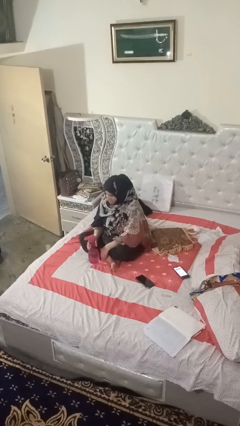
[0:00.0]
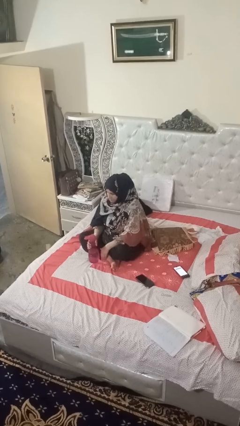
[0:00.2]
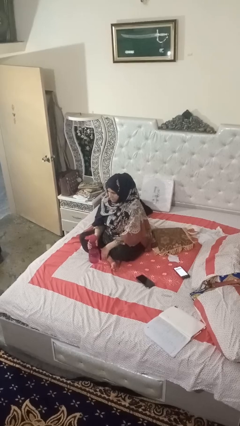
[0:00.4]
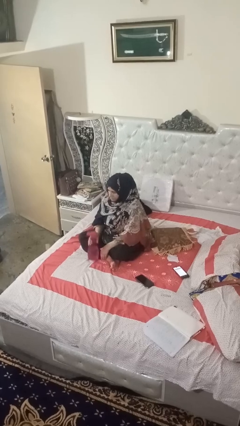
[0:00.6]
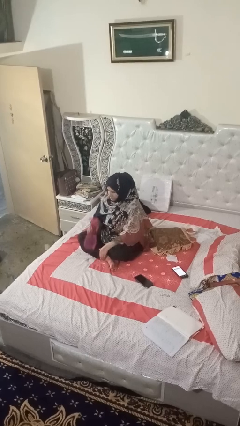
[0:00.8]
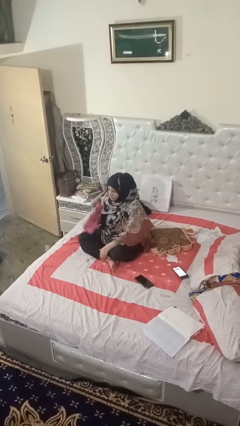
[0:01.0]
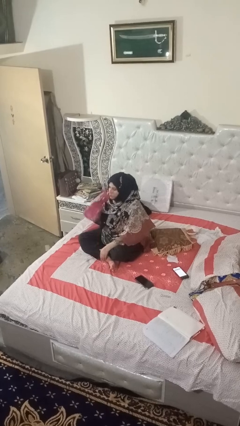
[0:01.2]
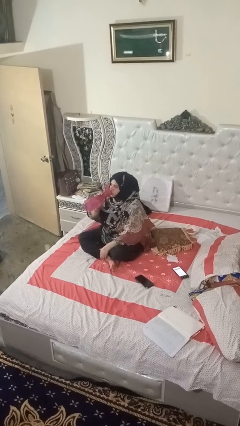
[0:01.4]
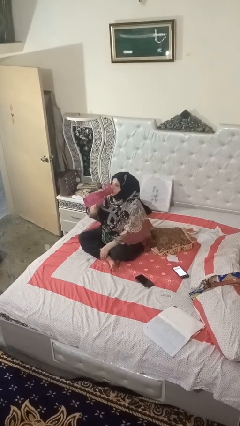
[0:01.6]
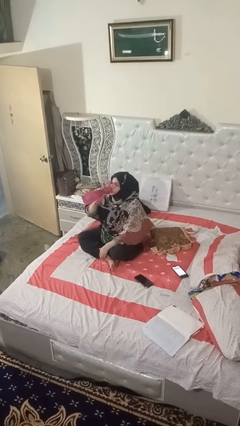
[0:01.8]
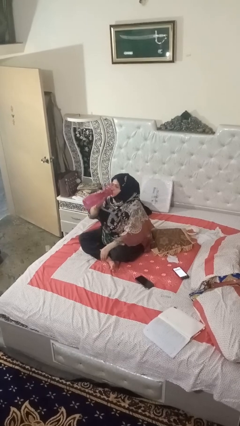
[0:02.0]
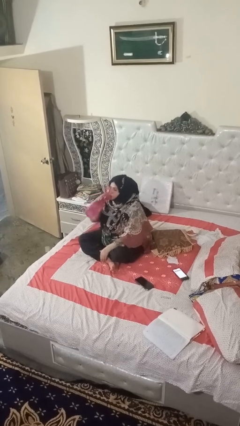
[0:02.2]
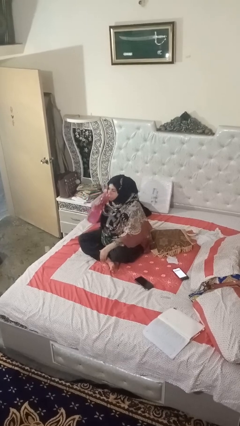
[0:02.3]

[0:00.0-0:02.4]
person drinks from bottle

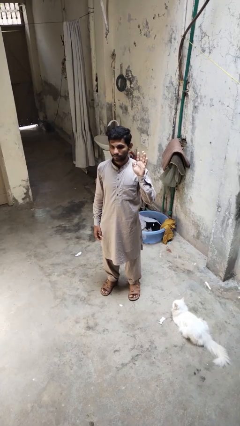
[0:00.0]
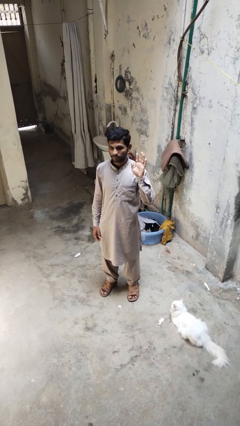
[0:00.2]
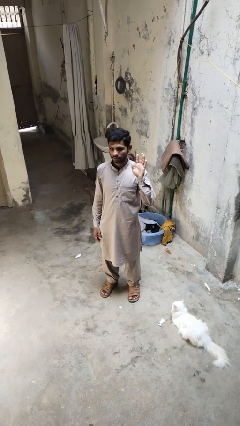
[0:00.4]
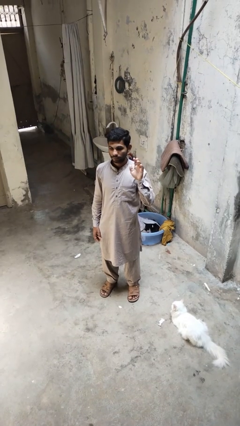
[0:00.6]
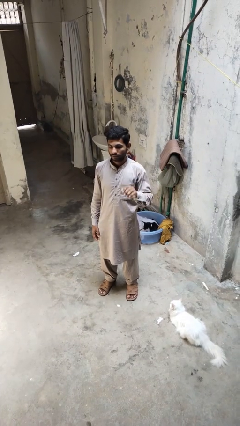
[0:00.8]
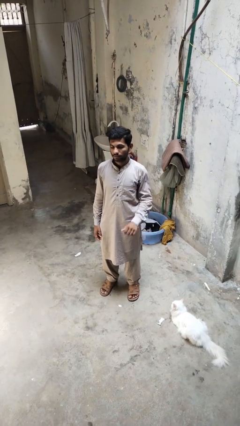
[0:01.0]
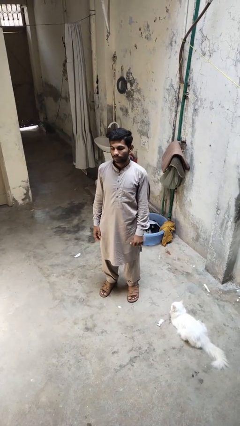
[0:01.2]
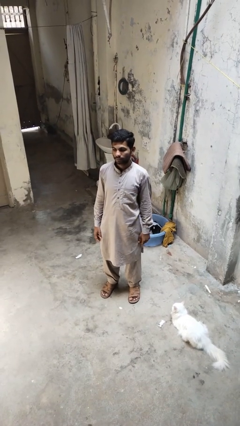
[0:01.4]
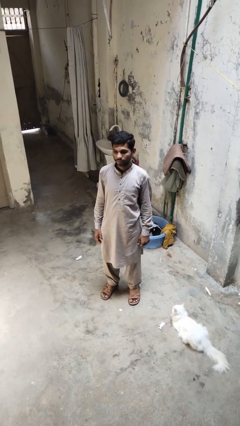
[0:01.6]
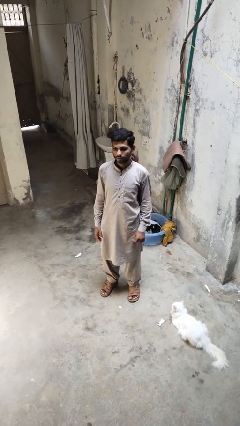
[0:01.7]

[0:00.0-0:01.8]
person gestures lower hand

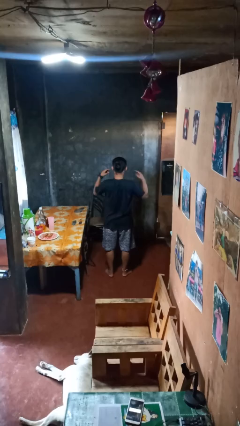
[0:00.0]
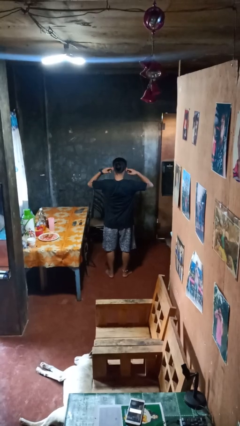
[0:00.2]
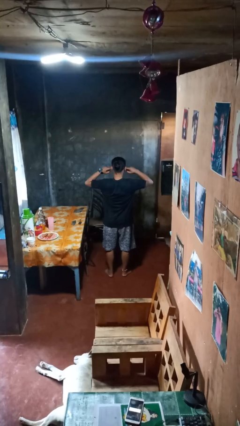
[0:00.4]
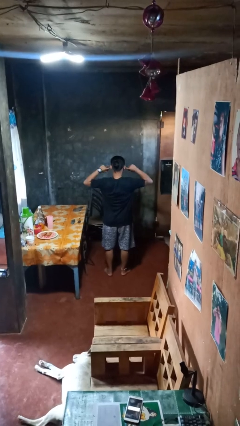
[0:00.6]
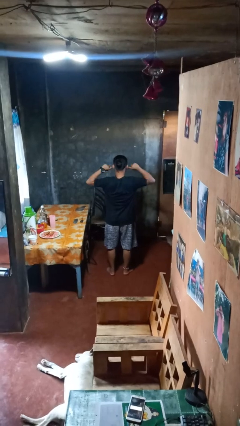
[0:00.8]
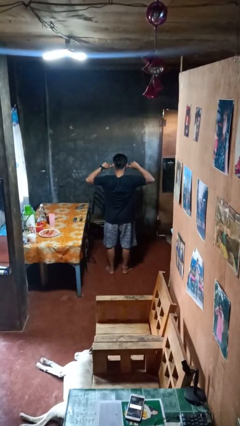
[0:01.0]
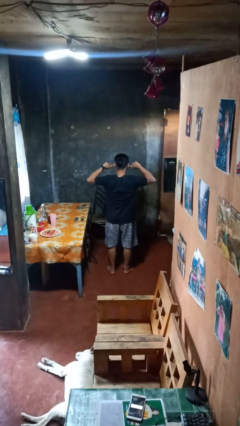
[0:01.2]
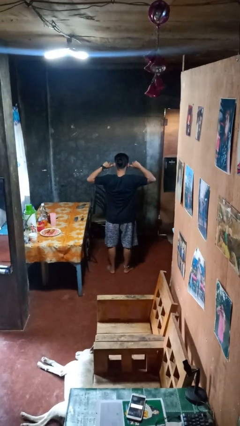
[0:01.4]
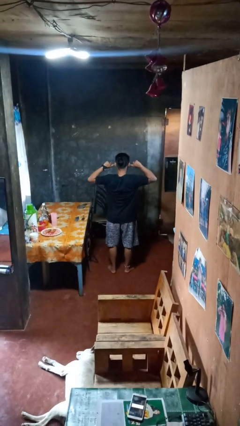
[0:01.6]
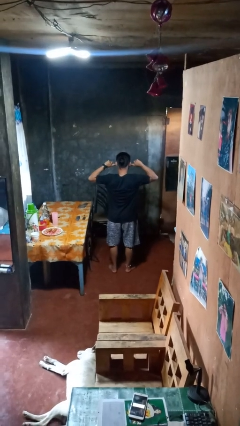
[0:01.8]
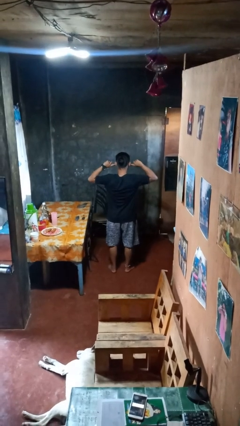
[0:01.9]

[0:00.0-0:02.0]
person puts fingers in ear

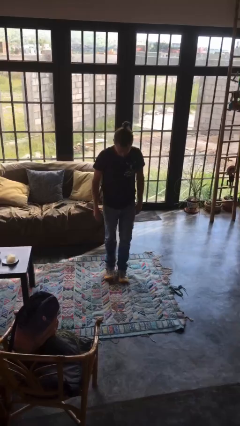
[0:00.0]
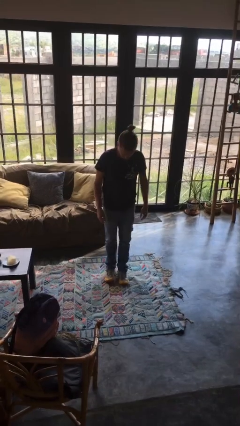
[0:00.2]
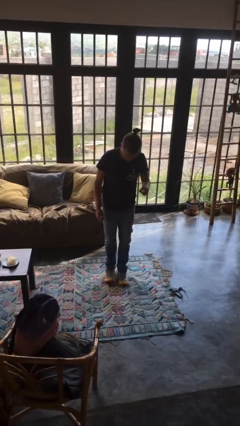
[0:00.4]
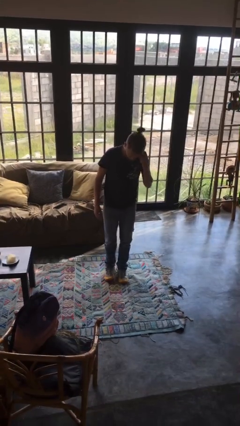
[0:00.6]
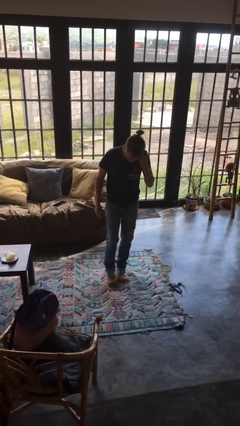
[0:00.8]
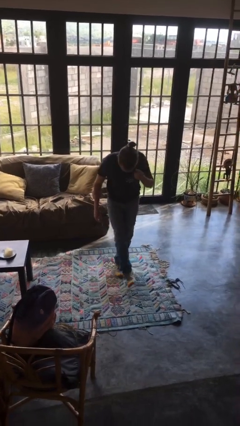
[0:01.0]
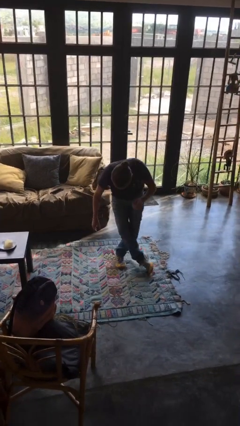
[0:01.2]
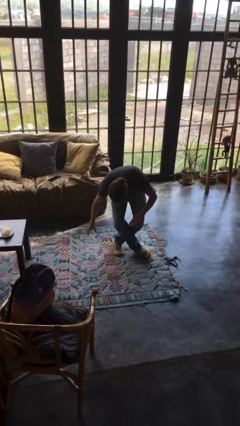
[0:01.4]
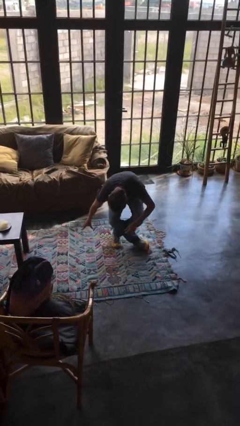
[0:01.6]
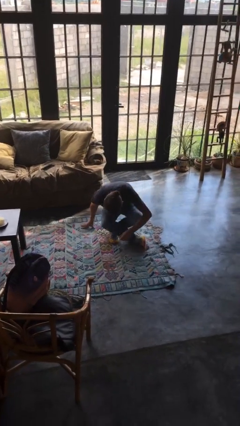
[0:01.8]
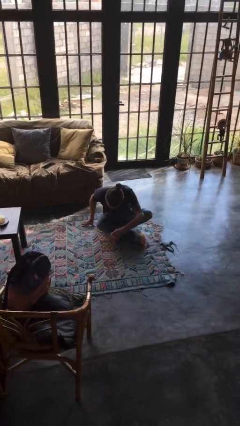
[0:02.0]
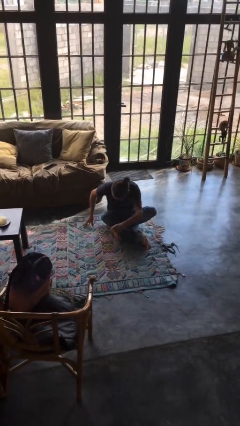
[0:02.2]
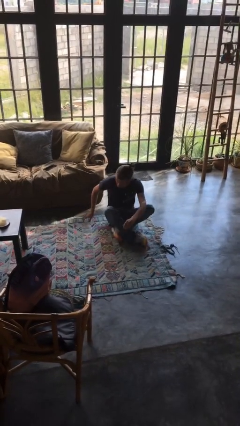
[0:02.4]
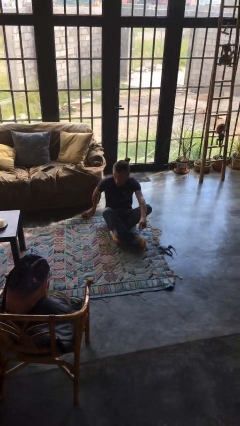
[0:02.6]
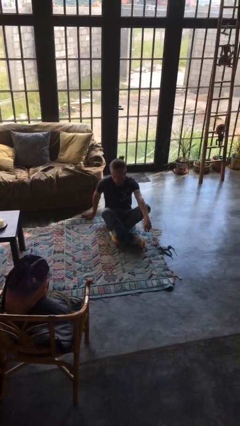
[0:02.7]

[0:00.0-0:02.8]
person sits crisscross

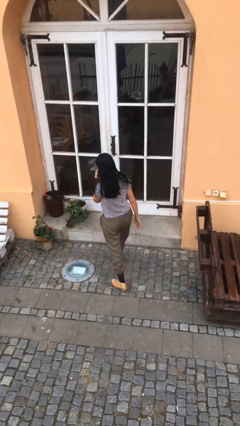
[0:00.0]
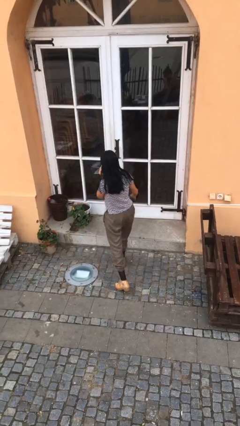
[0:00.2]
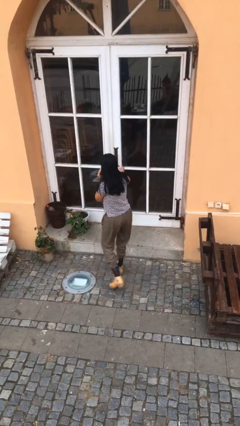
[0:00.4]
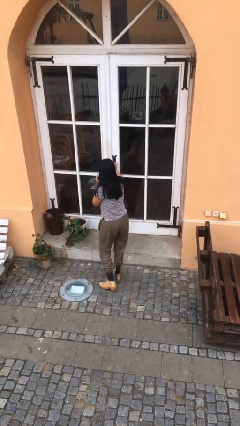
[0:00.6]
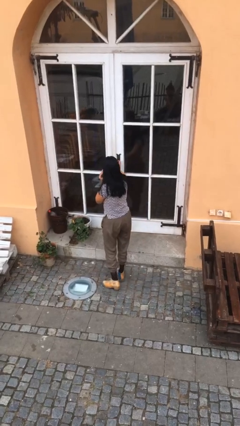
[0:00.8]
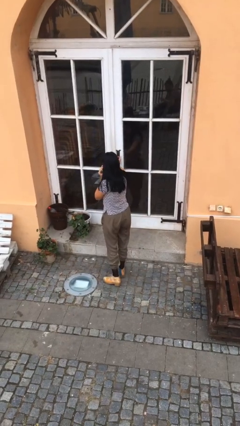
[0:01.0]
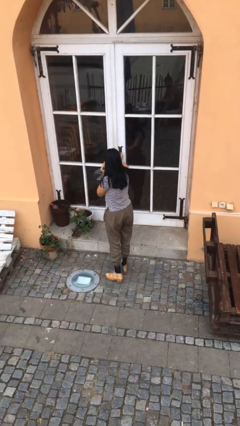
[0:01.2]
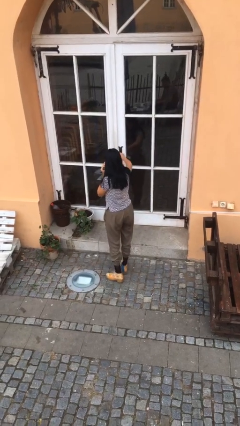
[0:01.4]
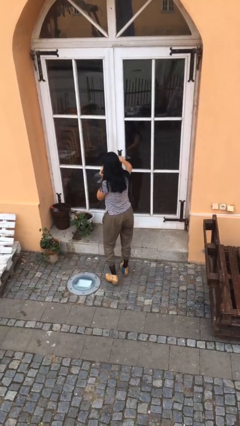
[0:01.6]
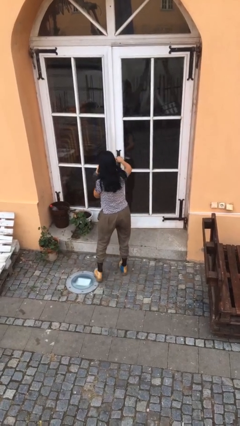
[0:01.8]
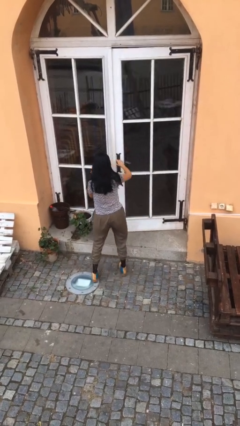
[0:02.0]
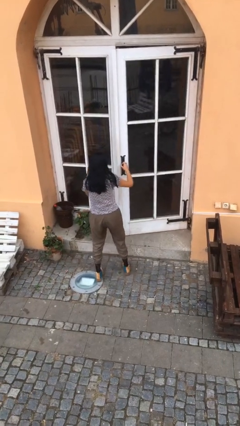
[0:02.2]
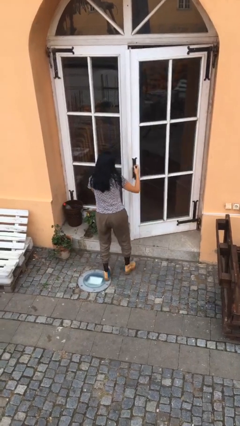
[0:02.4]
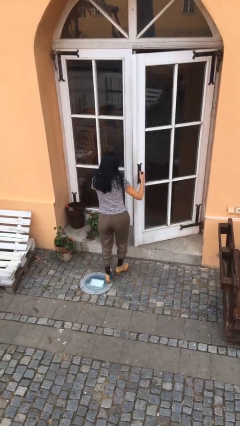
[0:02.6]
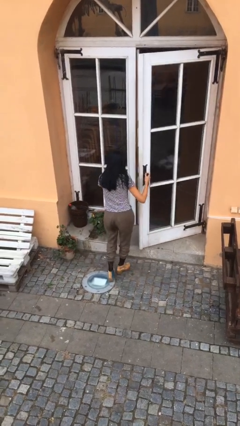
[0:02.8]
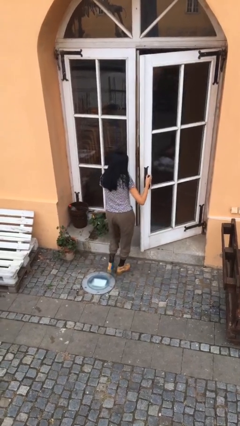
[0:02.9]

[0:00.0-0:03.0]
person opens facility door

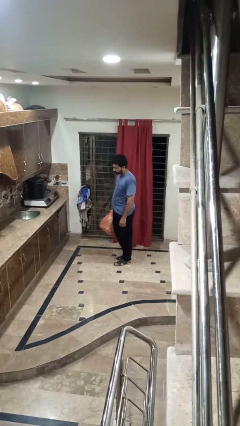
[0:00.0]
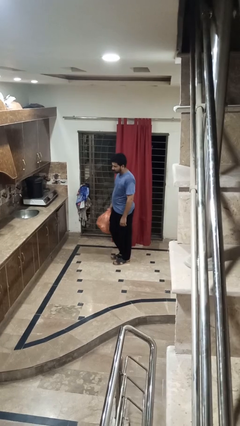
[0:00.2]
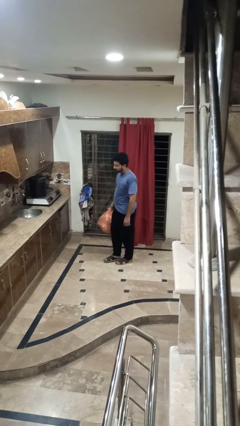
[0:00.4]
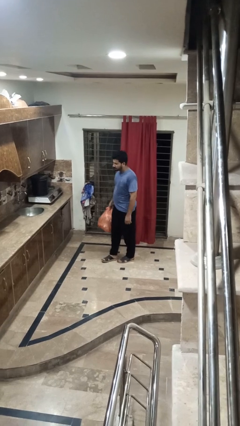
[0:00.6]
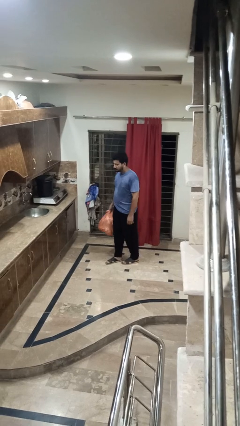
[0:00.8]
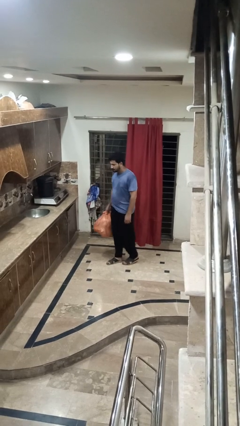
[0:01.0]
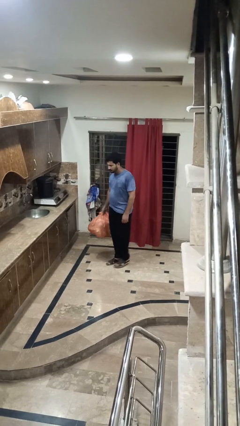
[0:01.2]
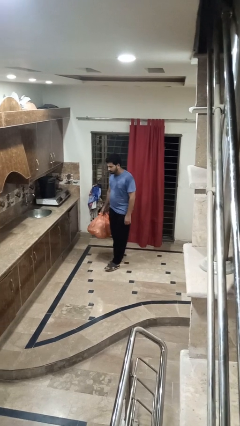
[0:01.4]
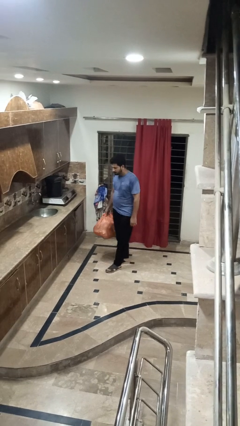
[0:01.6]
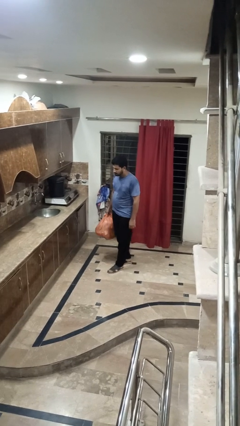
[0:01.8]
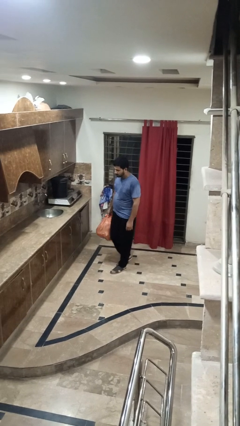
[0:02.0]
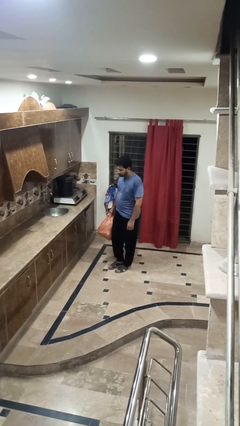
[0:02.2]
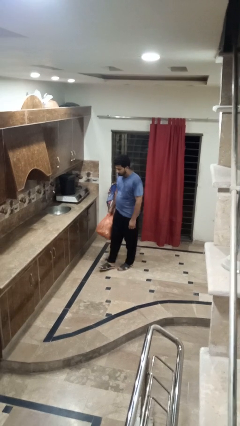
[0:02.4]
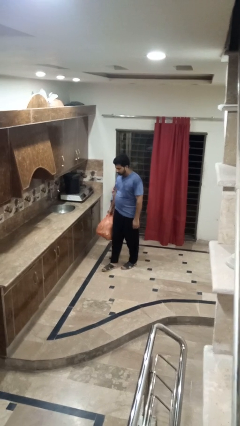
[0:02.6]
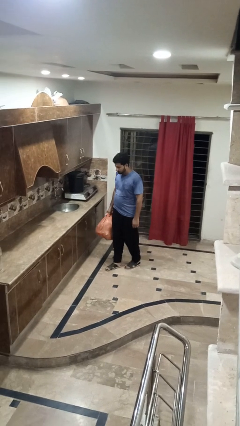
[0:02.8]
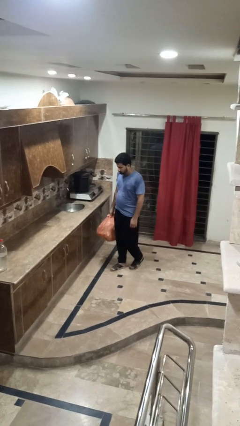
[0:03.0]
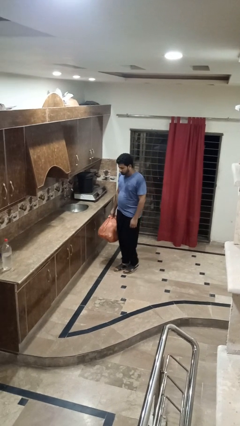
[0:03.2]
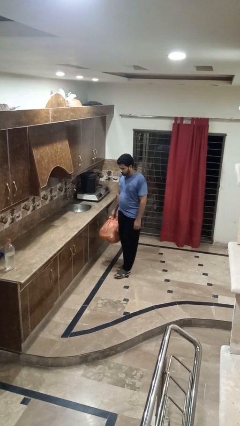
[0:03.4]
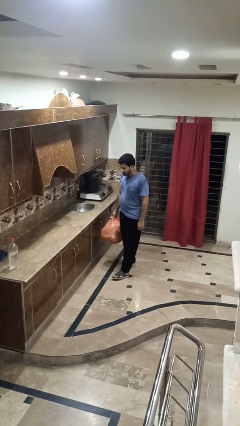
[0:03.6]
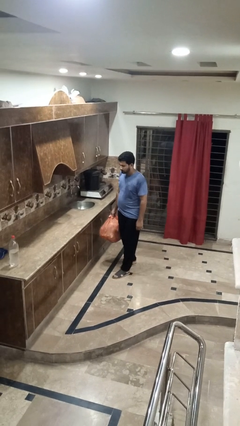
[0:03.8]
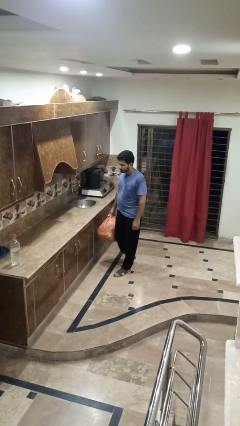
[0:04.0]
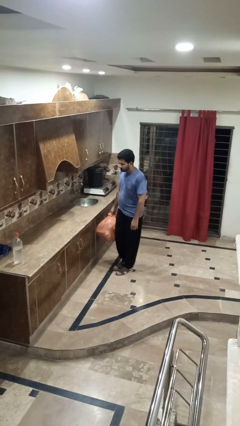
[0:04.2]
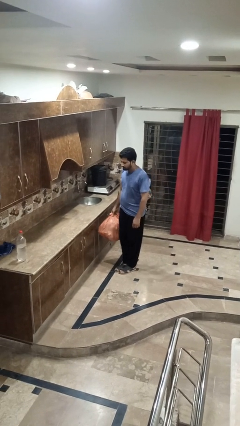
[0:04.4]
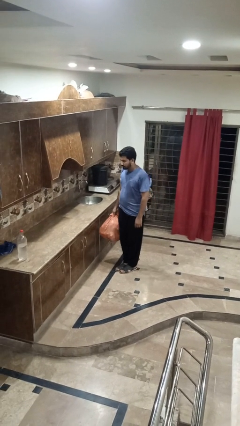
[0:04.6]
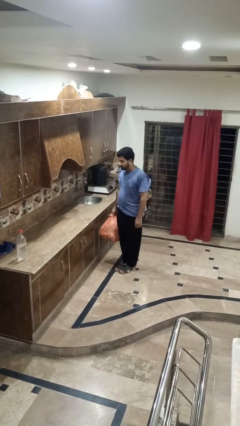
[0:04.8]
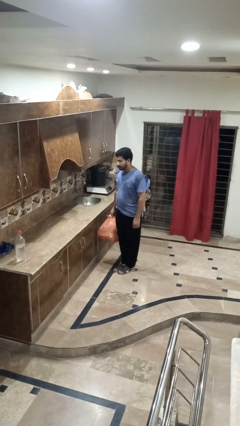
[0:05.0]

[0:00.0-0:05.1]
person carries groceries

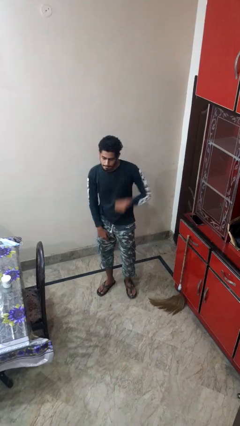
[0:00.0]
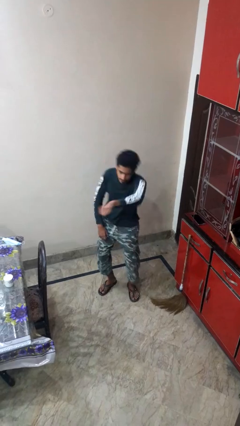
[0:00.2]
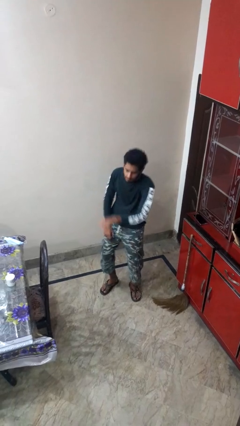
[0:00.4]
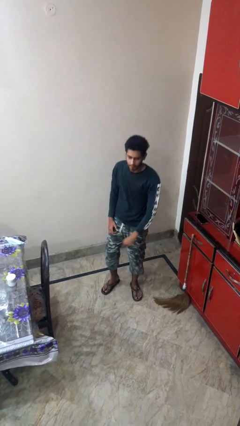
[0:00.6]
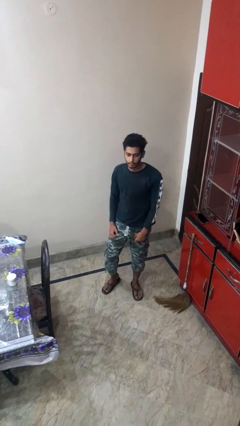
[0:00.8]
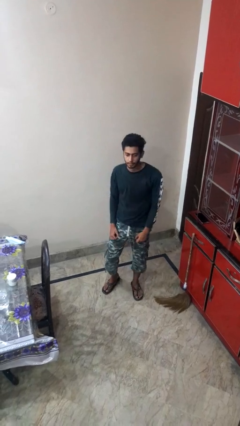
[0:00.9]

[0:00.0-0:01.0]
person punches
